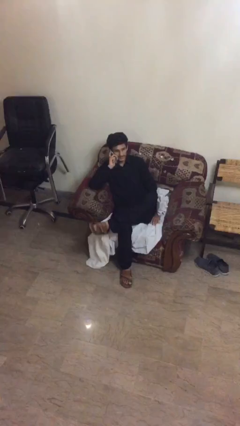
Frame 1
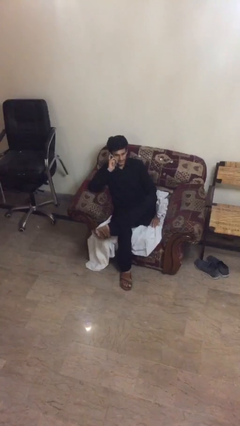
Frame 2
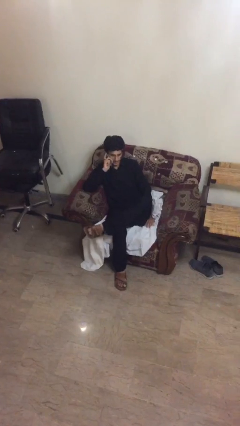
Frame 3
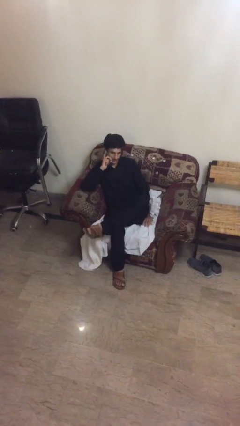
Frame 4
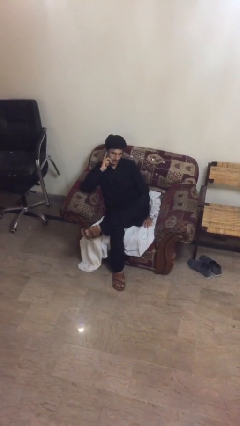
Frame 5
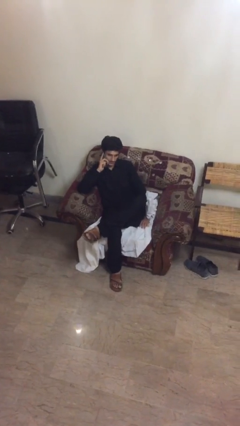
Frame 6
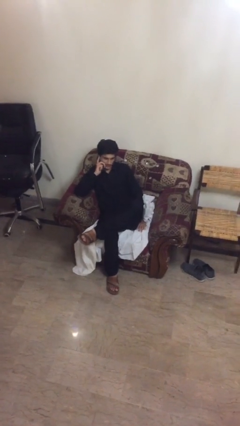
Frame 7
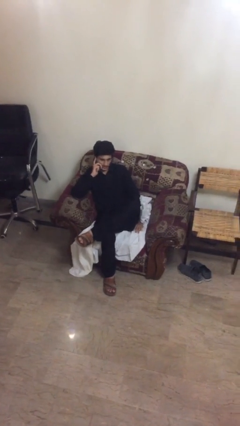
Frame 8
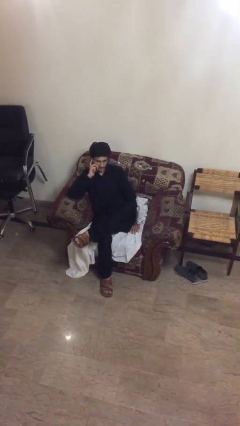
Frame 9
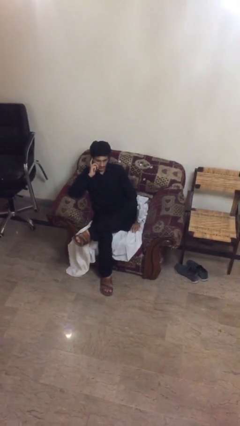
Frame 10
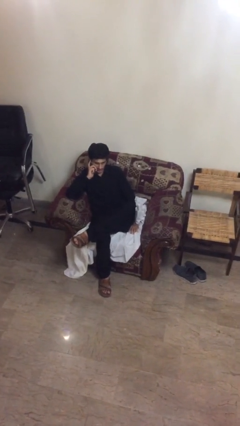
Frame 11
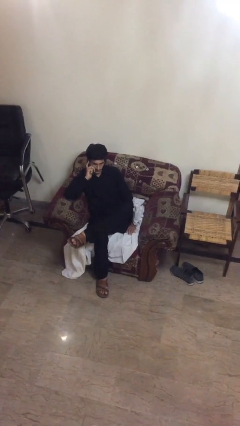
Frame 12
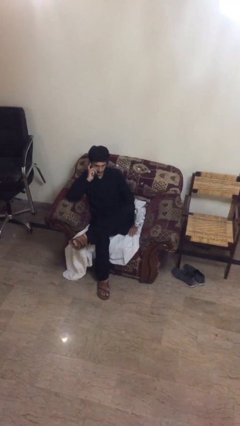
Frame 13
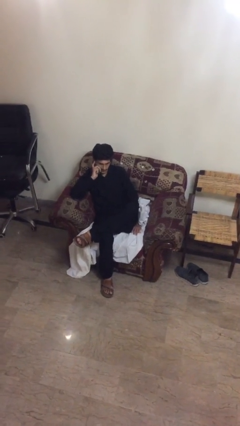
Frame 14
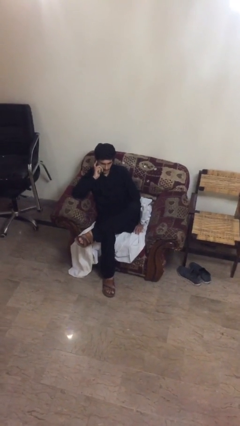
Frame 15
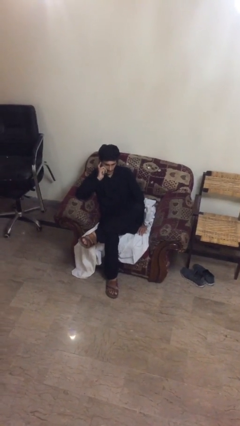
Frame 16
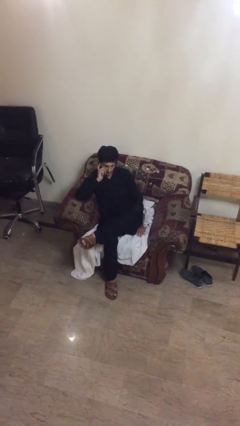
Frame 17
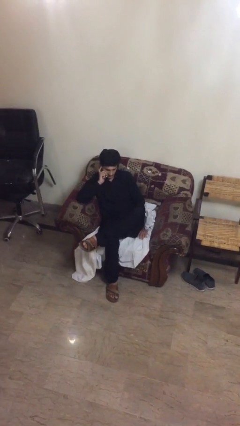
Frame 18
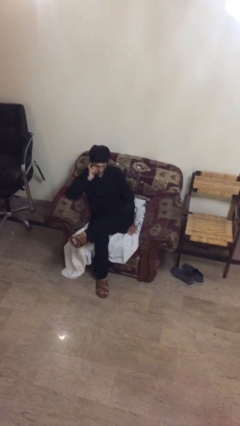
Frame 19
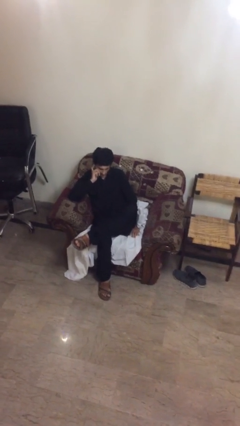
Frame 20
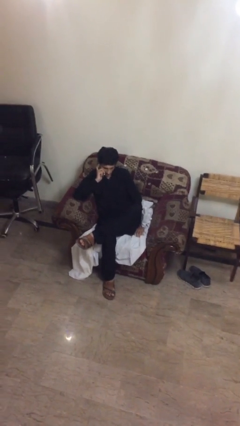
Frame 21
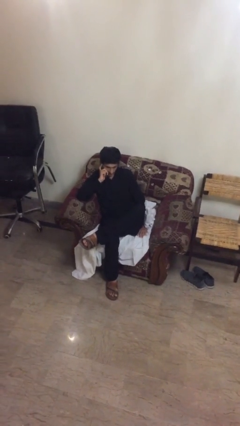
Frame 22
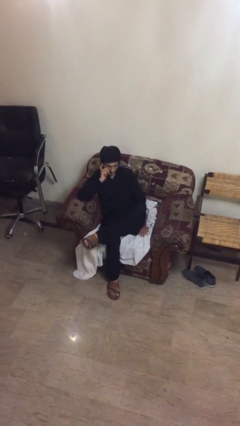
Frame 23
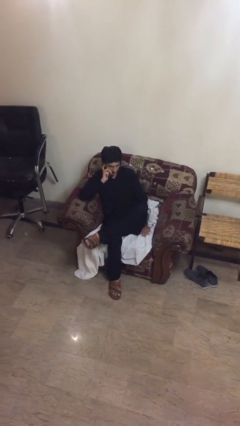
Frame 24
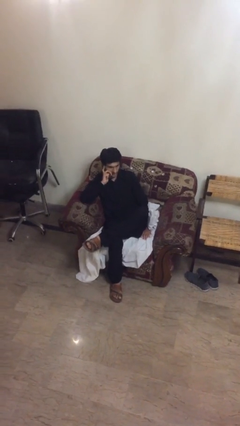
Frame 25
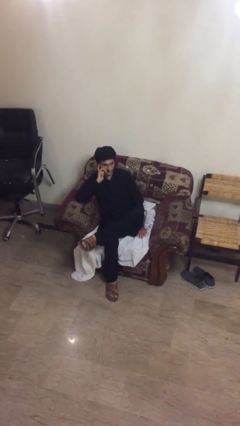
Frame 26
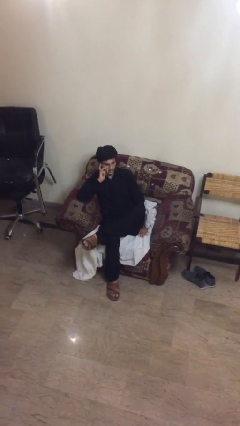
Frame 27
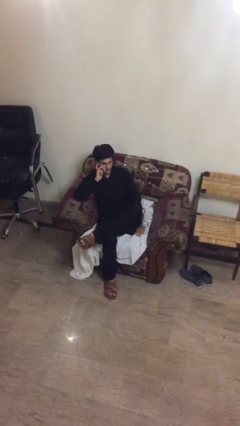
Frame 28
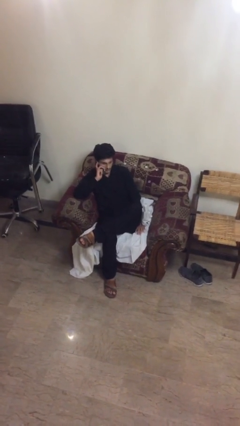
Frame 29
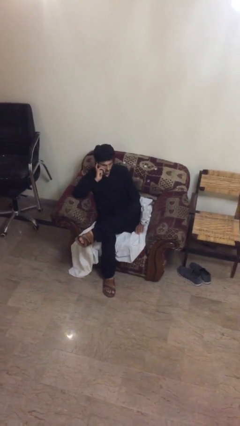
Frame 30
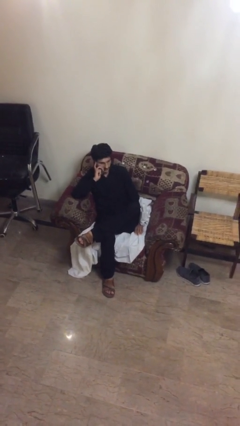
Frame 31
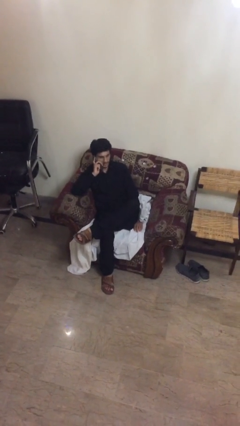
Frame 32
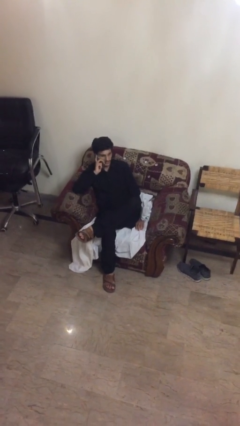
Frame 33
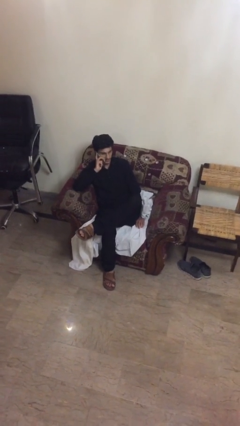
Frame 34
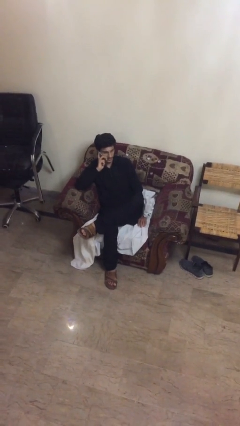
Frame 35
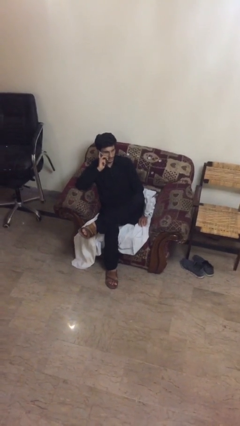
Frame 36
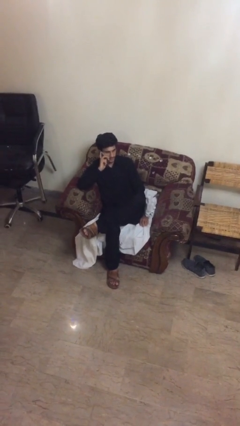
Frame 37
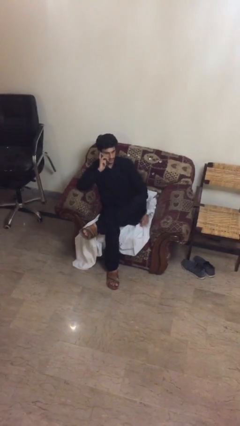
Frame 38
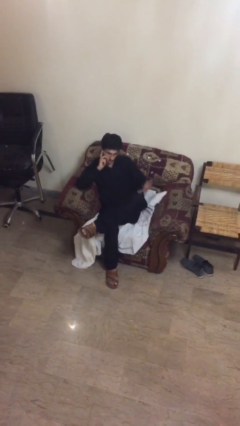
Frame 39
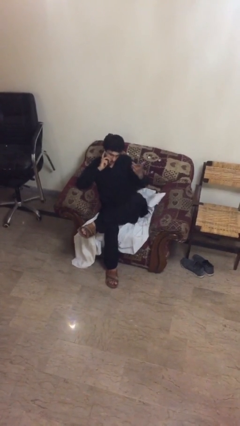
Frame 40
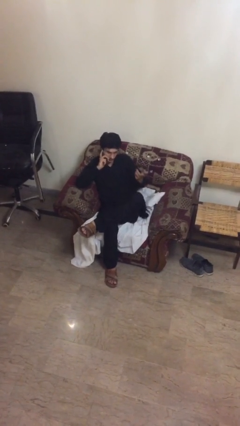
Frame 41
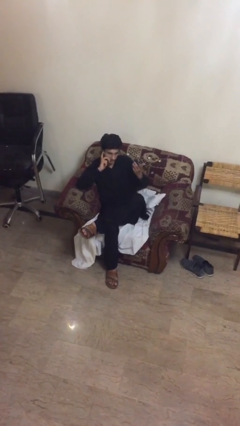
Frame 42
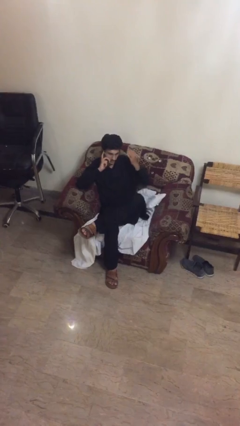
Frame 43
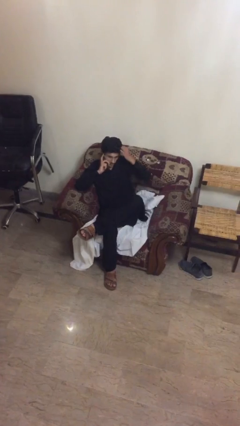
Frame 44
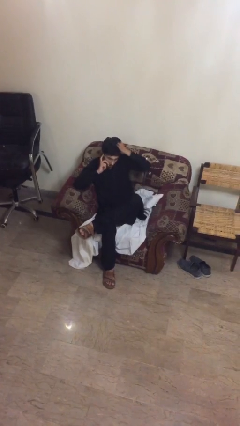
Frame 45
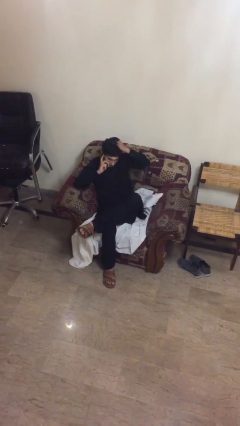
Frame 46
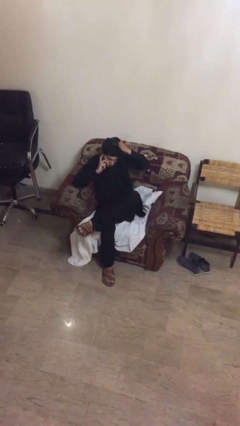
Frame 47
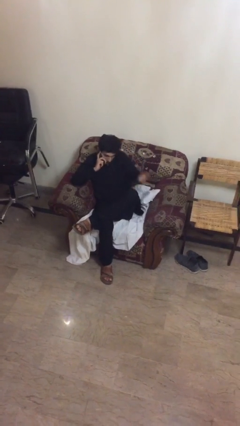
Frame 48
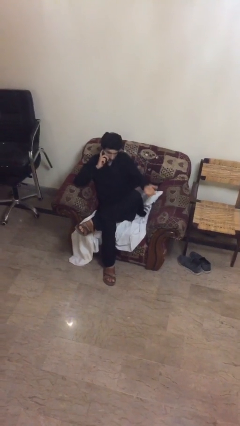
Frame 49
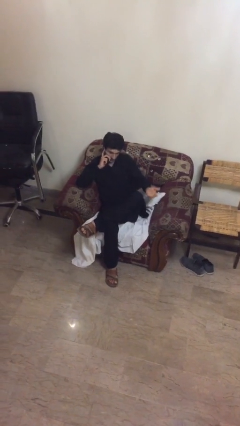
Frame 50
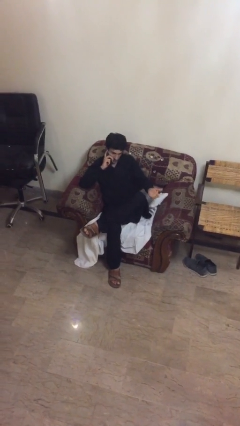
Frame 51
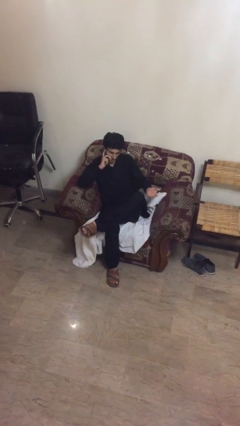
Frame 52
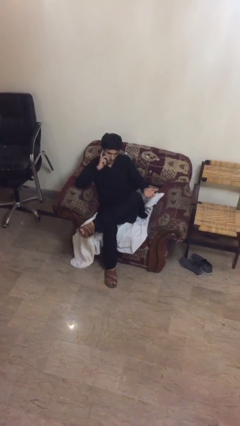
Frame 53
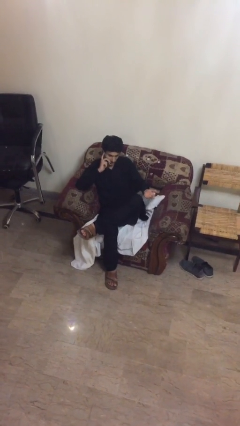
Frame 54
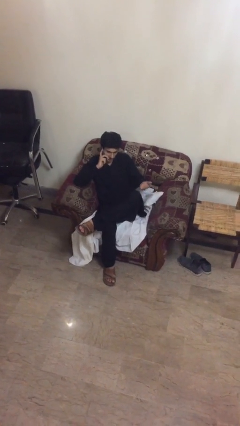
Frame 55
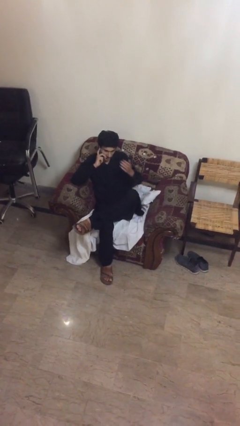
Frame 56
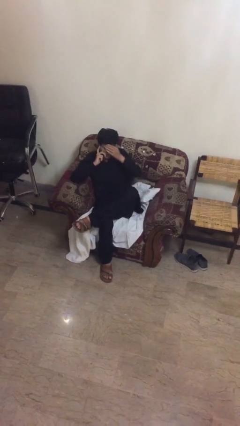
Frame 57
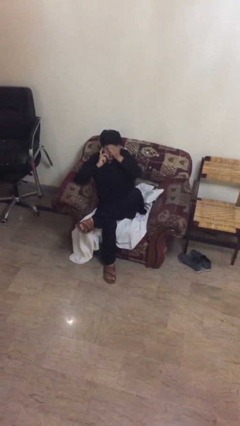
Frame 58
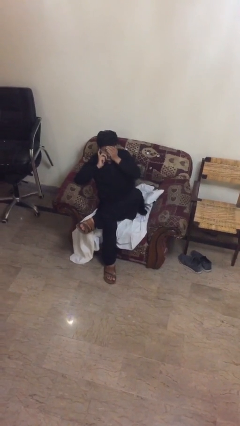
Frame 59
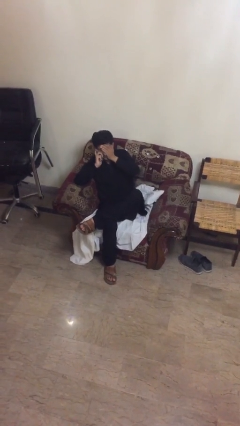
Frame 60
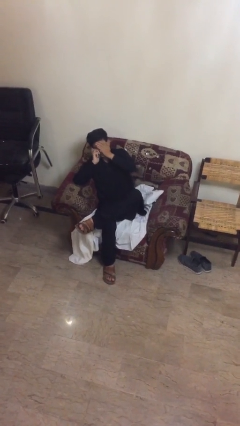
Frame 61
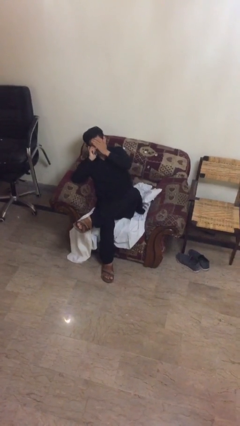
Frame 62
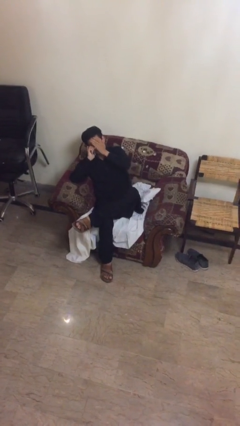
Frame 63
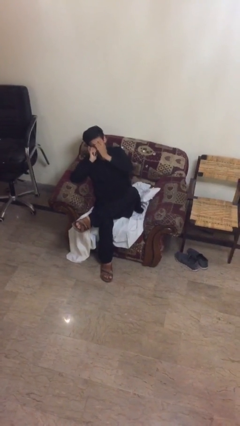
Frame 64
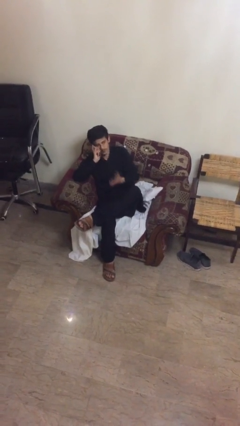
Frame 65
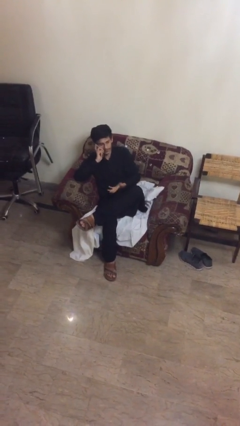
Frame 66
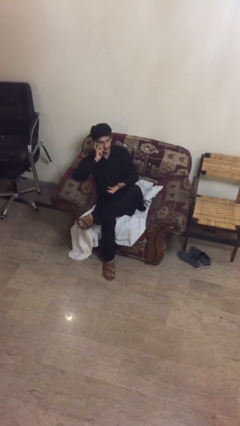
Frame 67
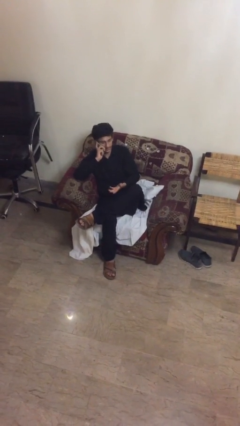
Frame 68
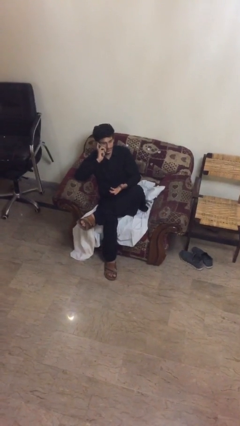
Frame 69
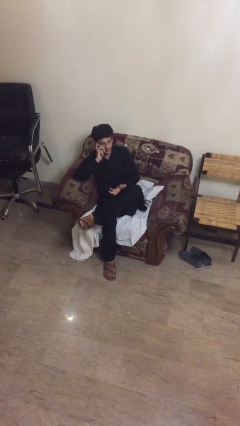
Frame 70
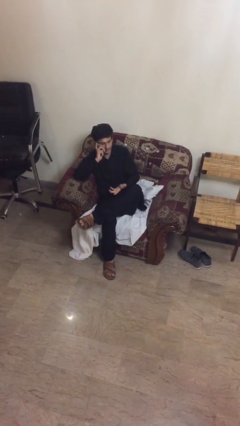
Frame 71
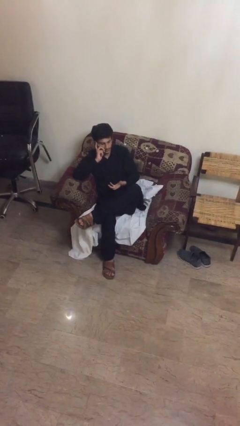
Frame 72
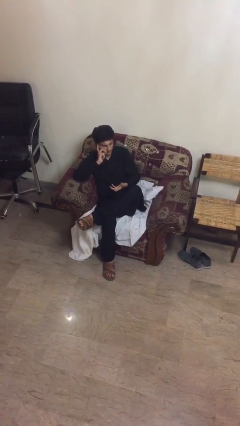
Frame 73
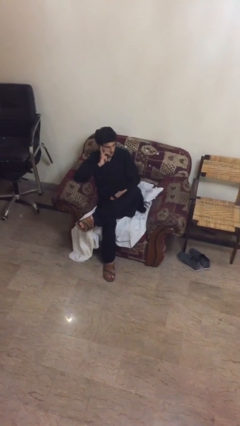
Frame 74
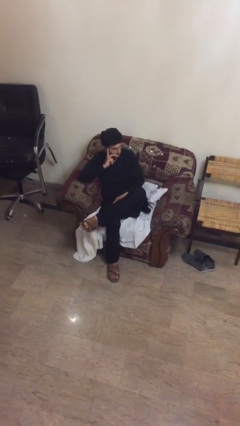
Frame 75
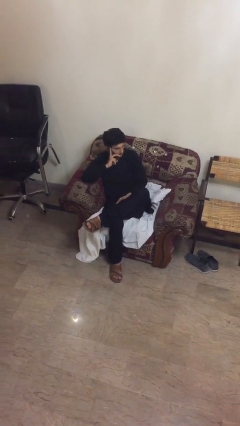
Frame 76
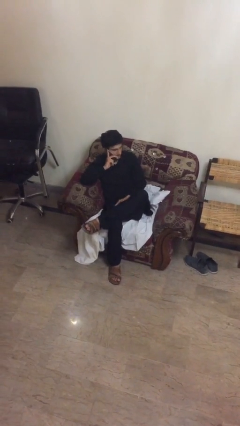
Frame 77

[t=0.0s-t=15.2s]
person talks on phone

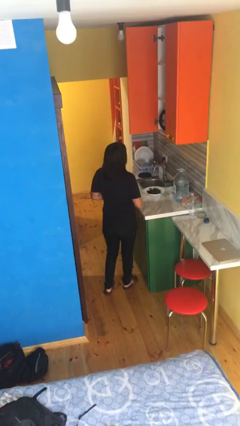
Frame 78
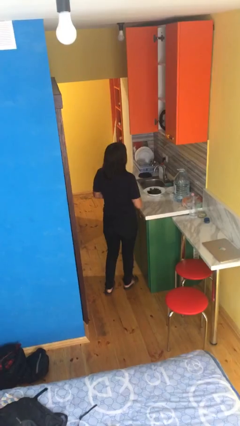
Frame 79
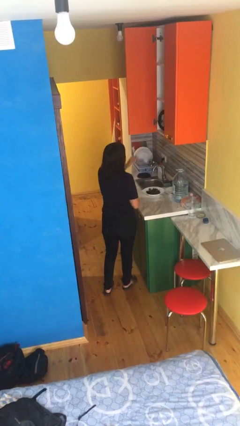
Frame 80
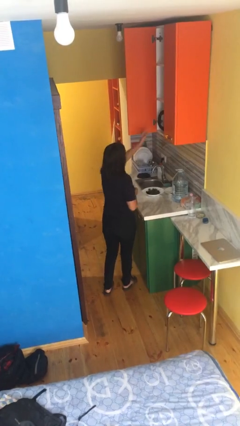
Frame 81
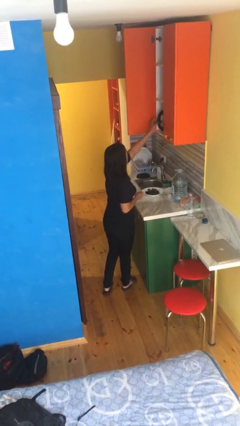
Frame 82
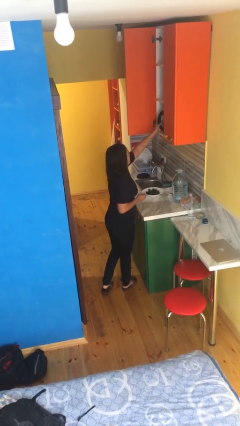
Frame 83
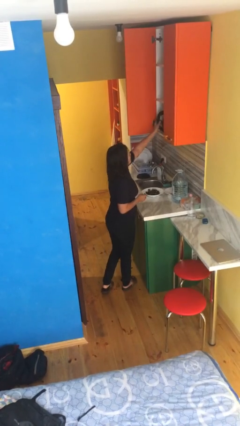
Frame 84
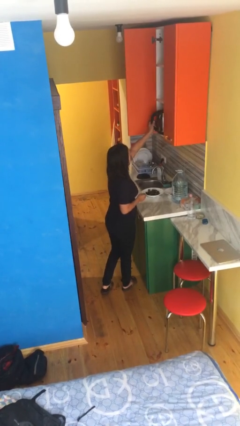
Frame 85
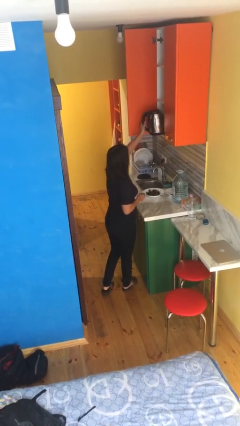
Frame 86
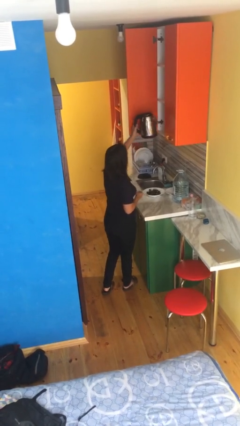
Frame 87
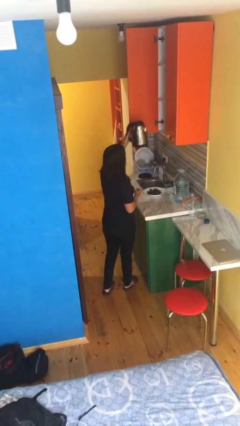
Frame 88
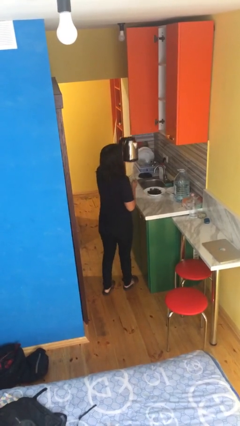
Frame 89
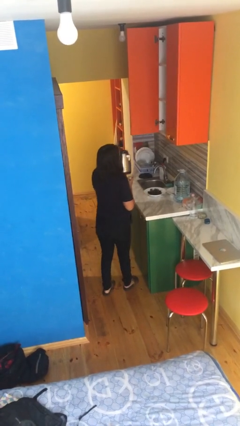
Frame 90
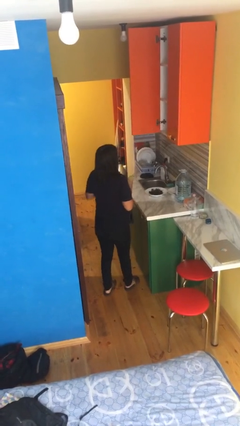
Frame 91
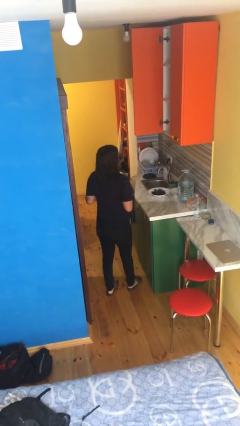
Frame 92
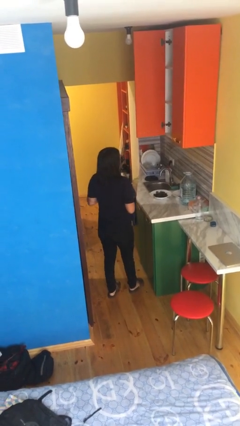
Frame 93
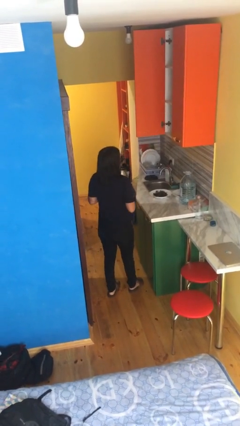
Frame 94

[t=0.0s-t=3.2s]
person picks up object from cabinet

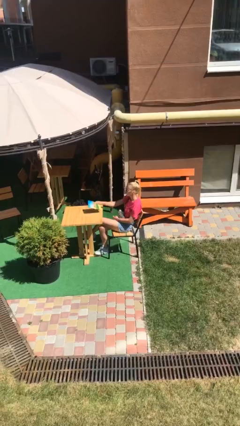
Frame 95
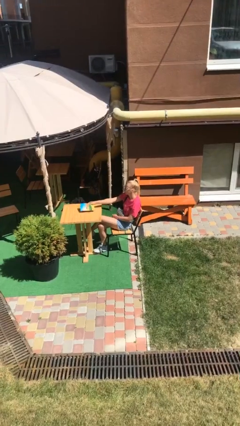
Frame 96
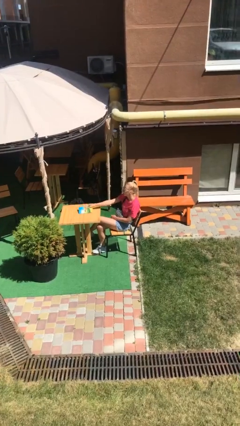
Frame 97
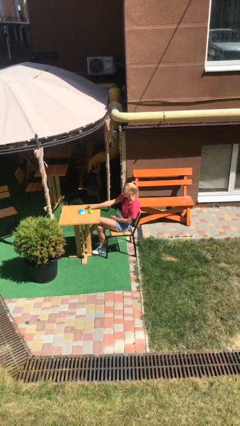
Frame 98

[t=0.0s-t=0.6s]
person puts down object on table
